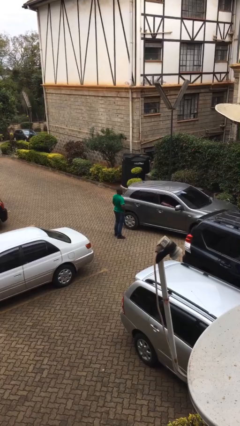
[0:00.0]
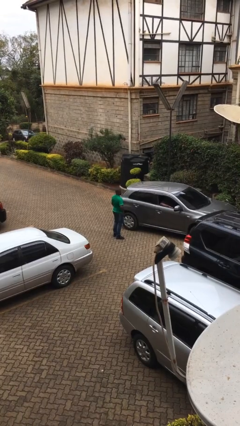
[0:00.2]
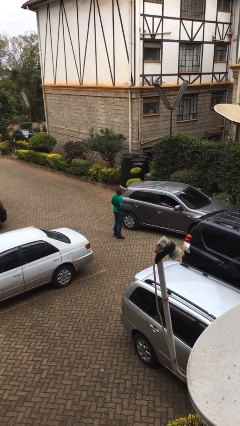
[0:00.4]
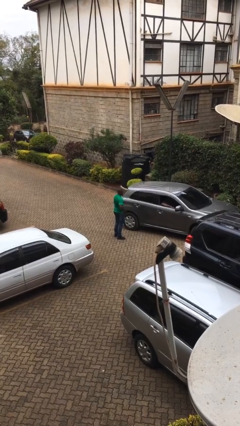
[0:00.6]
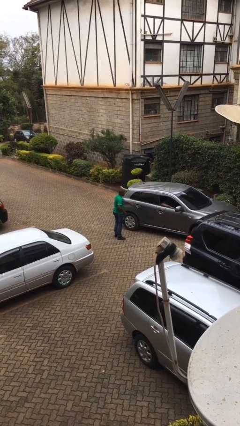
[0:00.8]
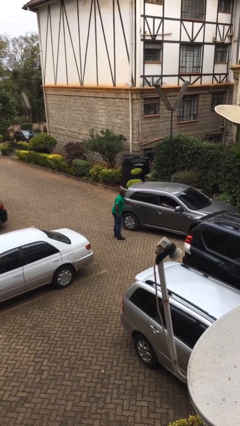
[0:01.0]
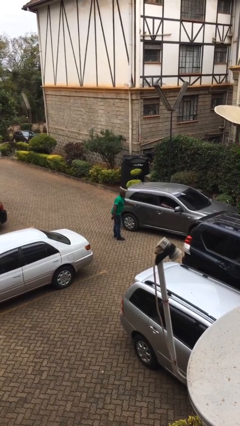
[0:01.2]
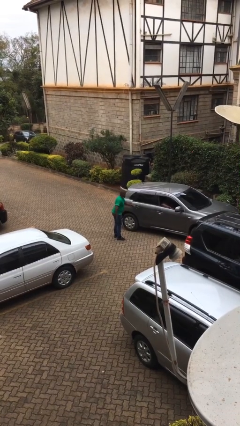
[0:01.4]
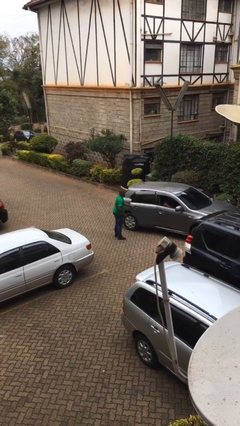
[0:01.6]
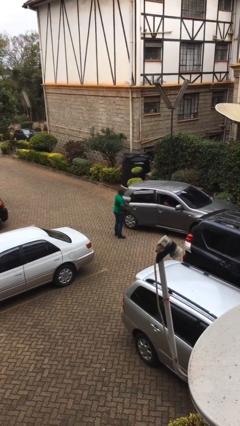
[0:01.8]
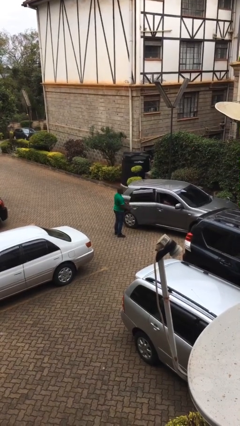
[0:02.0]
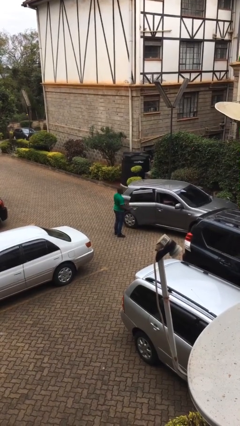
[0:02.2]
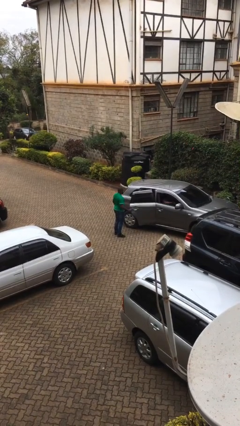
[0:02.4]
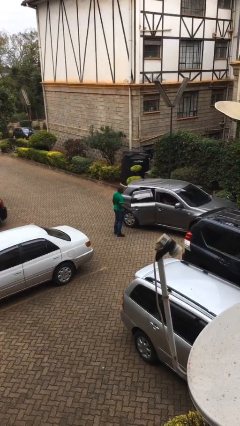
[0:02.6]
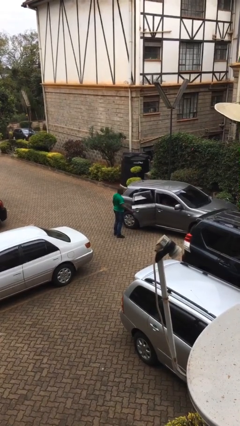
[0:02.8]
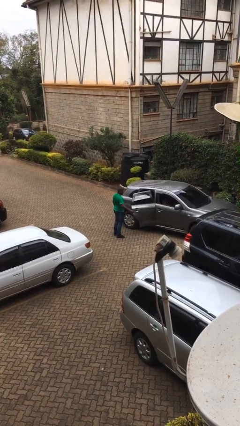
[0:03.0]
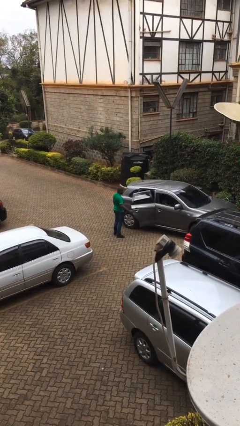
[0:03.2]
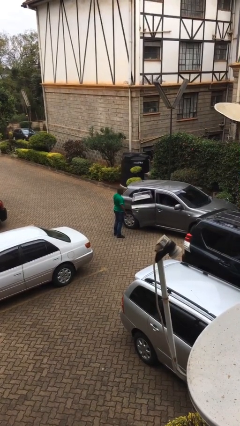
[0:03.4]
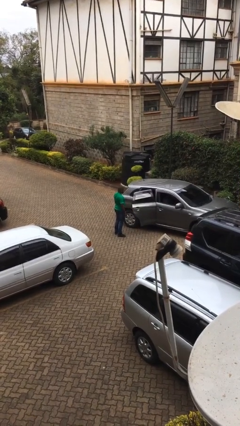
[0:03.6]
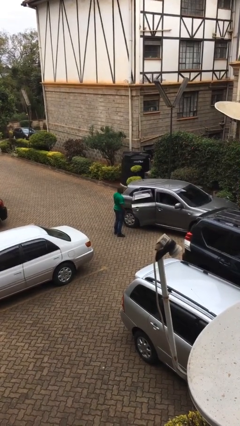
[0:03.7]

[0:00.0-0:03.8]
person opens car door

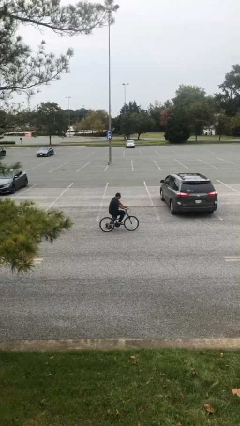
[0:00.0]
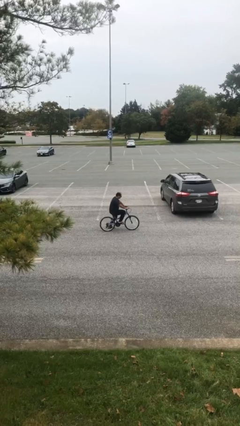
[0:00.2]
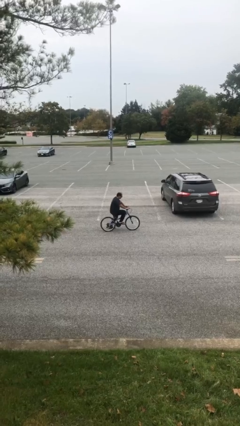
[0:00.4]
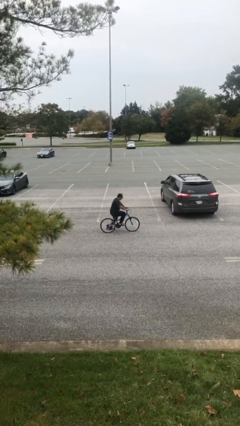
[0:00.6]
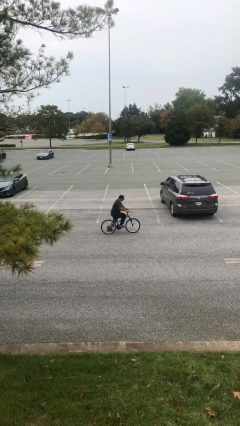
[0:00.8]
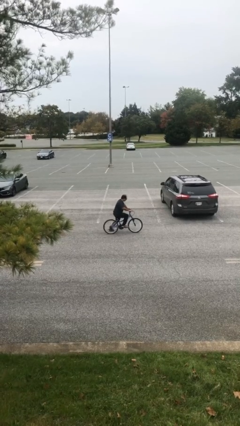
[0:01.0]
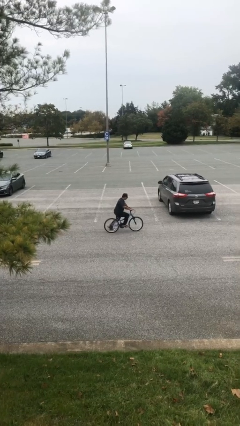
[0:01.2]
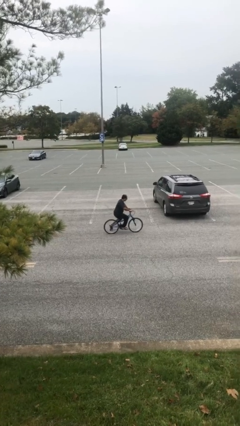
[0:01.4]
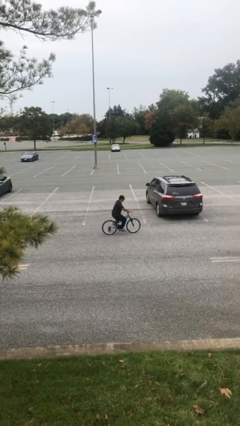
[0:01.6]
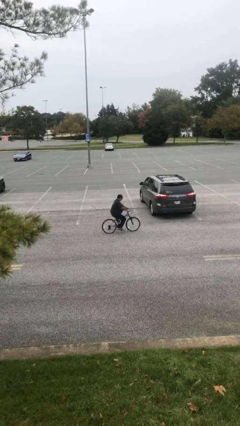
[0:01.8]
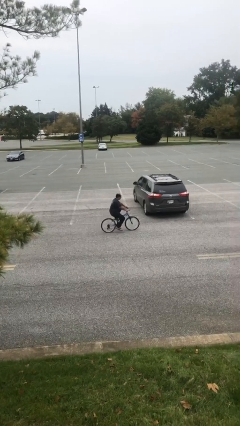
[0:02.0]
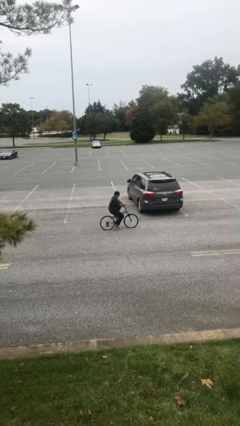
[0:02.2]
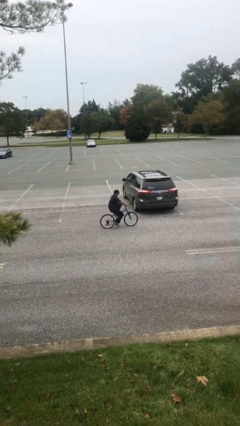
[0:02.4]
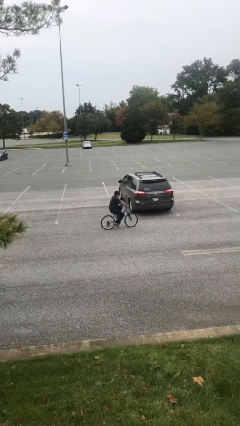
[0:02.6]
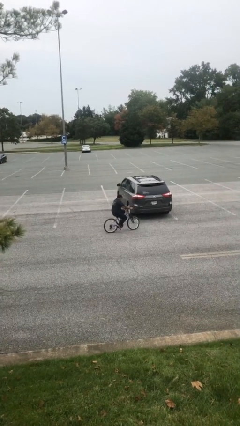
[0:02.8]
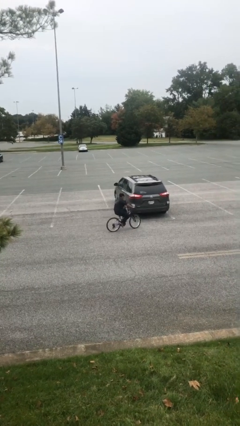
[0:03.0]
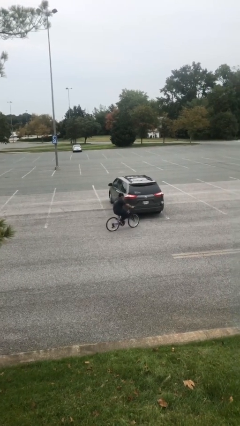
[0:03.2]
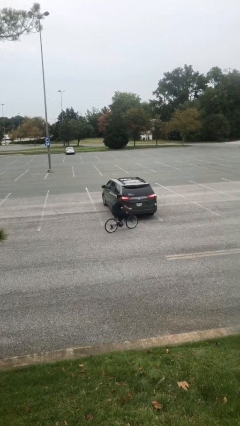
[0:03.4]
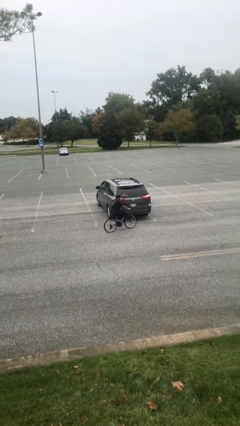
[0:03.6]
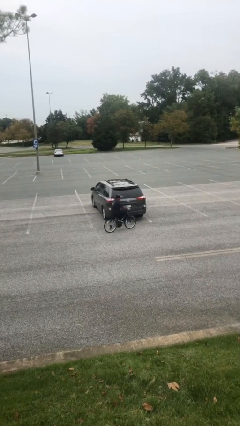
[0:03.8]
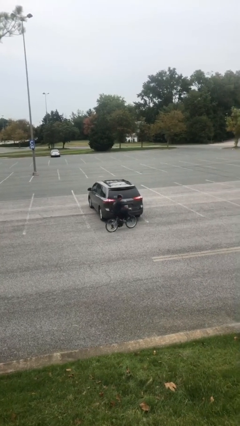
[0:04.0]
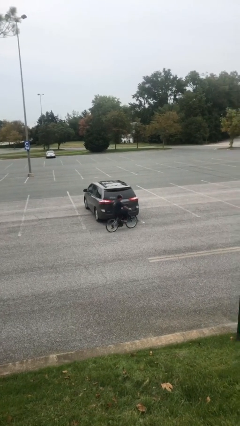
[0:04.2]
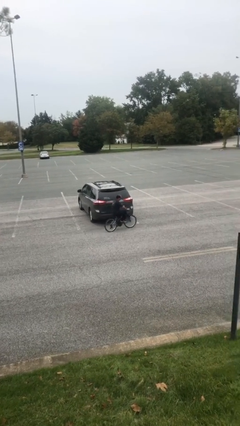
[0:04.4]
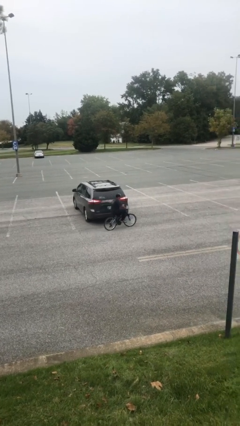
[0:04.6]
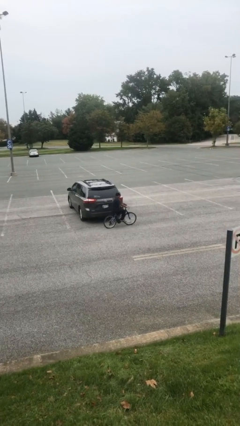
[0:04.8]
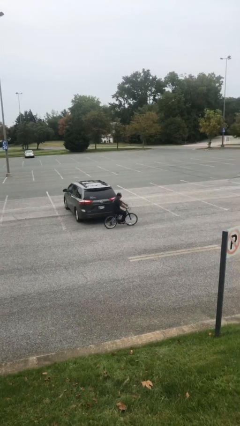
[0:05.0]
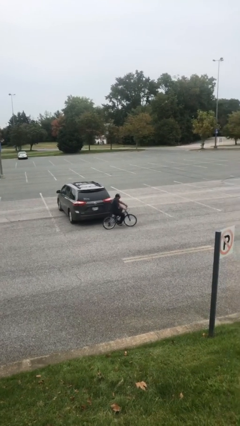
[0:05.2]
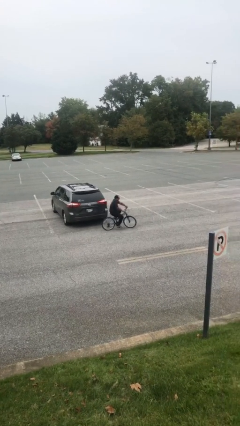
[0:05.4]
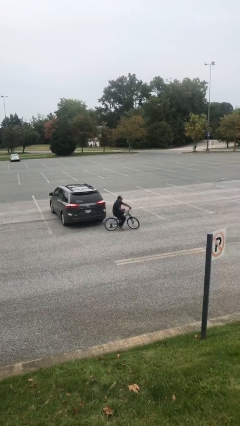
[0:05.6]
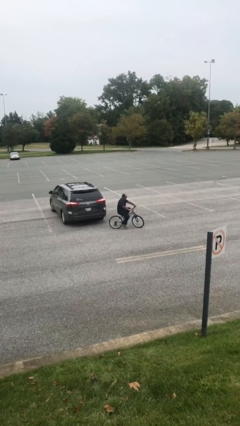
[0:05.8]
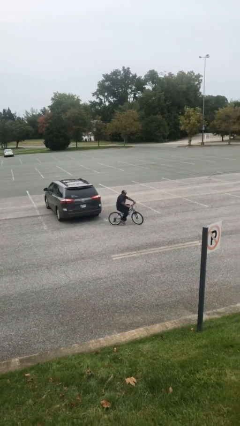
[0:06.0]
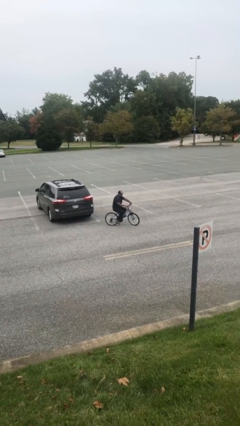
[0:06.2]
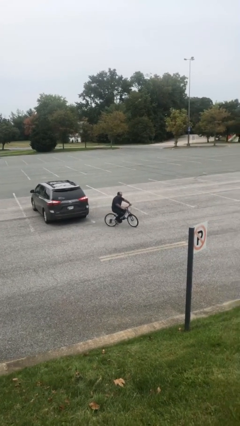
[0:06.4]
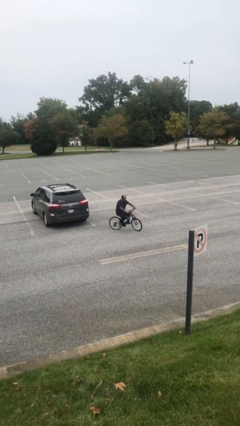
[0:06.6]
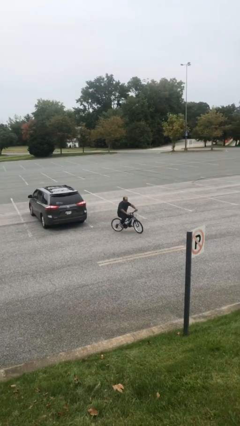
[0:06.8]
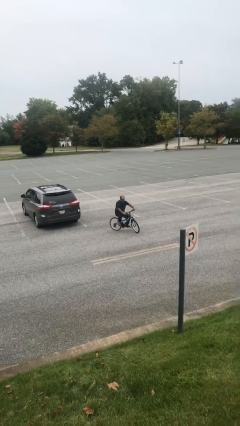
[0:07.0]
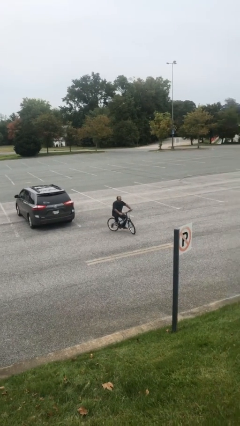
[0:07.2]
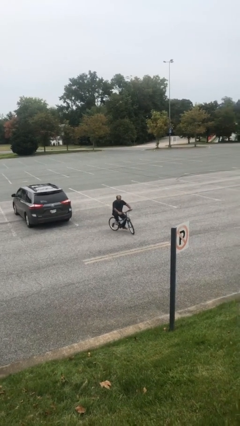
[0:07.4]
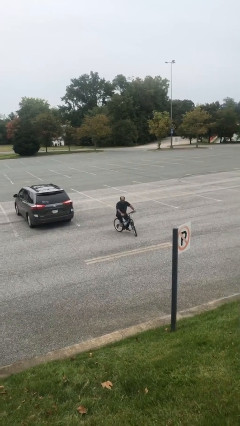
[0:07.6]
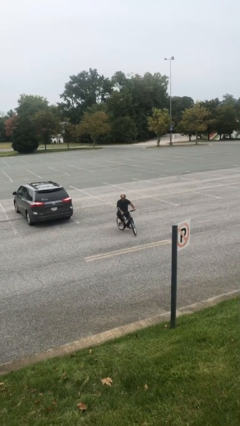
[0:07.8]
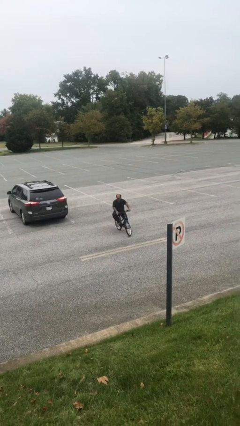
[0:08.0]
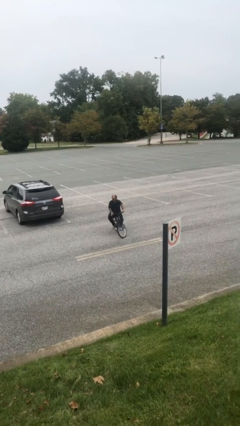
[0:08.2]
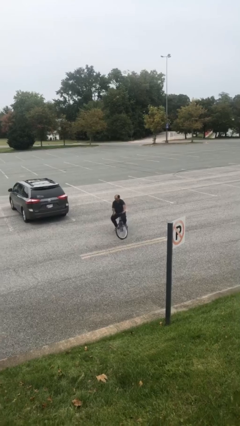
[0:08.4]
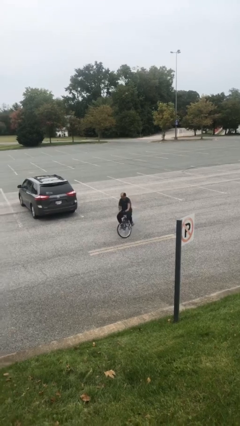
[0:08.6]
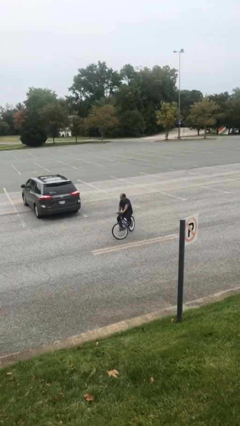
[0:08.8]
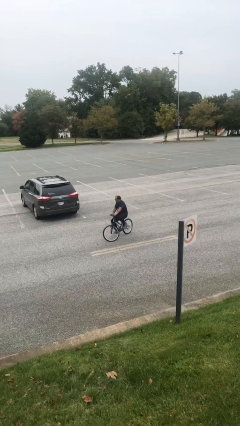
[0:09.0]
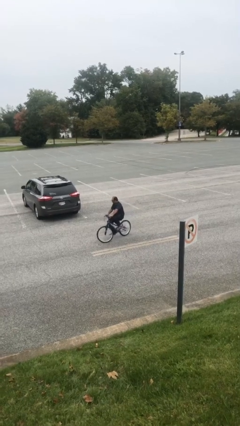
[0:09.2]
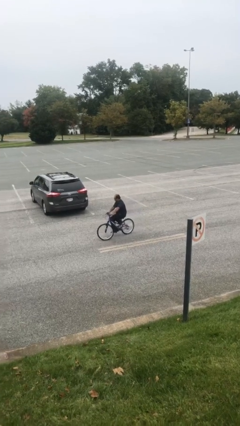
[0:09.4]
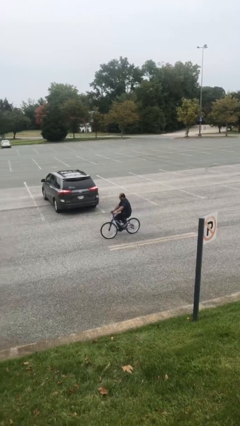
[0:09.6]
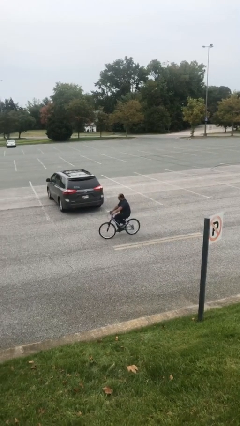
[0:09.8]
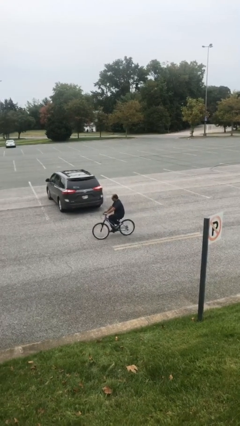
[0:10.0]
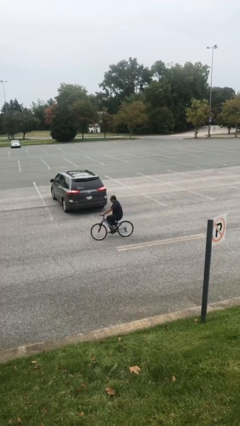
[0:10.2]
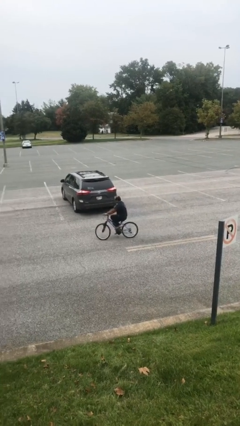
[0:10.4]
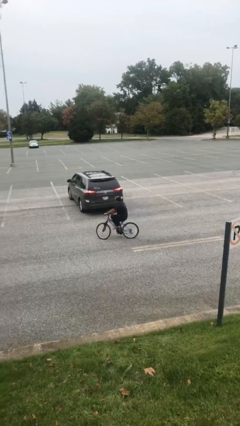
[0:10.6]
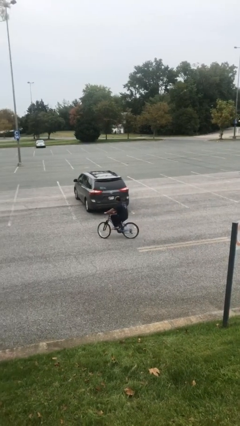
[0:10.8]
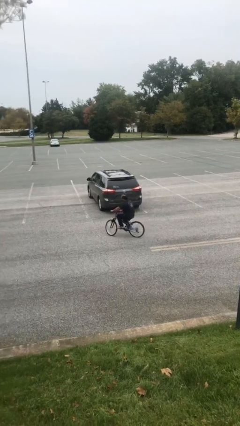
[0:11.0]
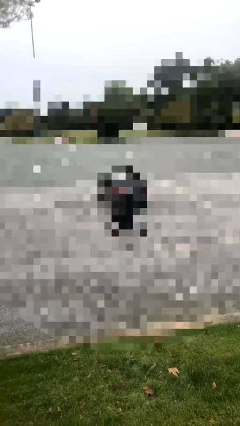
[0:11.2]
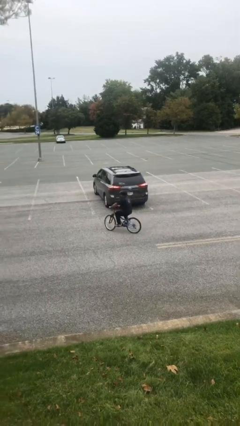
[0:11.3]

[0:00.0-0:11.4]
person rides bicycle

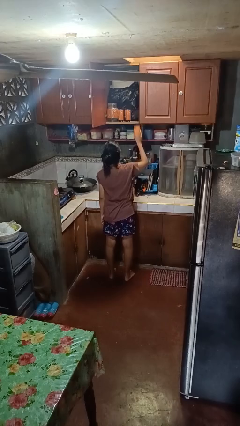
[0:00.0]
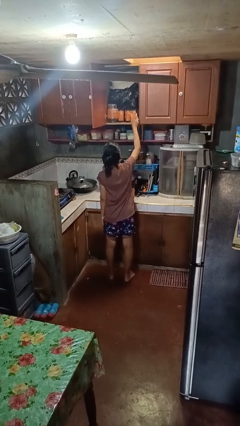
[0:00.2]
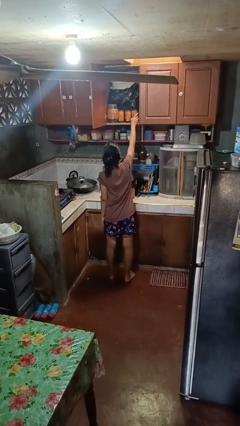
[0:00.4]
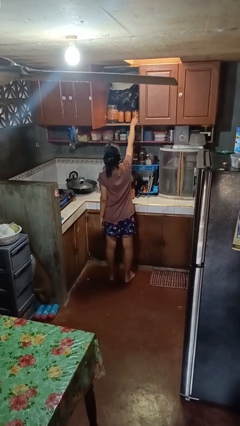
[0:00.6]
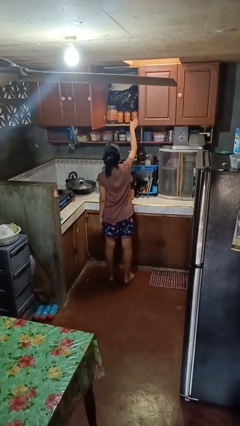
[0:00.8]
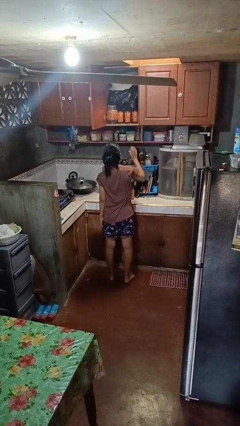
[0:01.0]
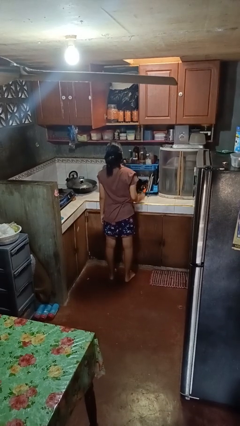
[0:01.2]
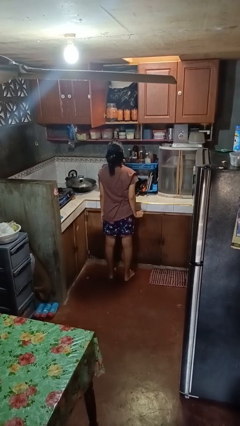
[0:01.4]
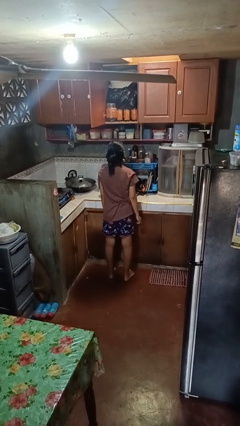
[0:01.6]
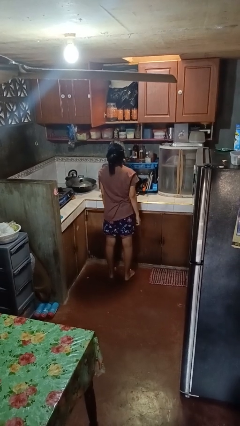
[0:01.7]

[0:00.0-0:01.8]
person puts object in cabinet

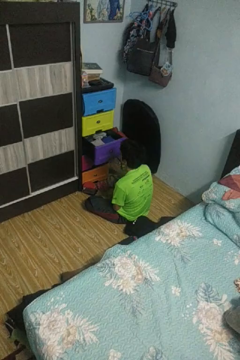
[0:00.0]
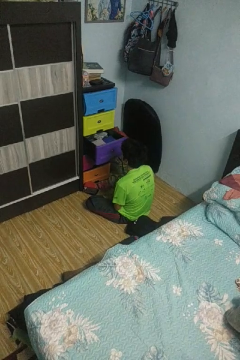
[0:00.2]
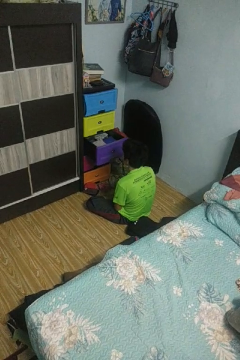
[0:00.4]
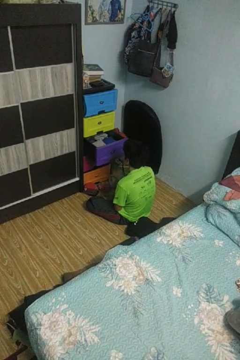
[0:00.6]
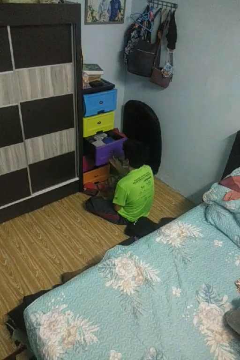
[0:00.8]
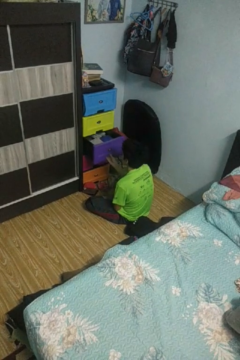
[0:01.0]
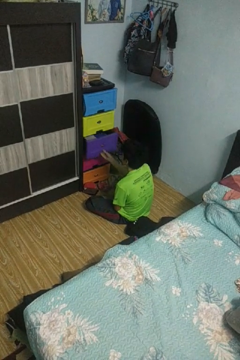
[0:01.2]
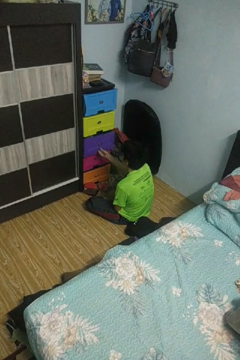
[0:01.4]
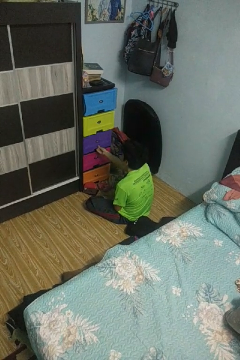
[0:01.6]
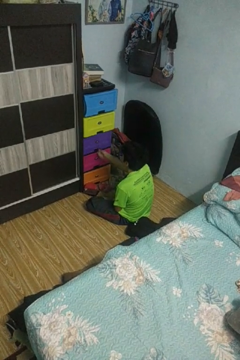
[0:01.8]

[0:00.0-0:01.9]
person closes dresser drawer
